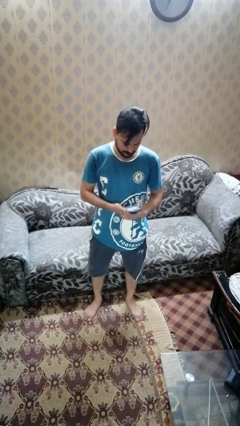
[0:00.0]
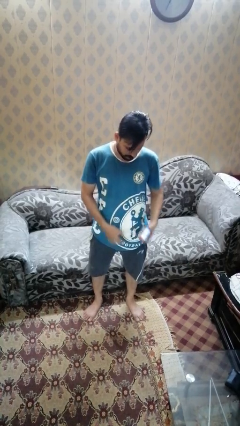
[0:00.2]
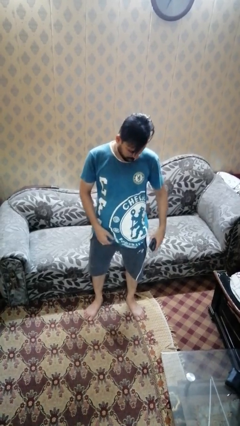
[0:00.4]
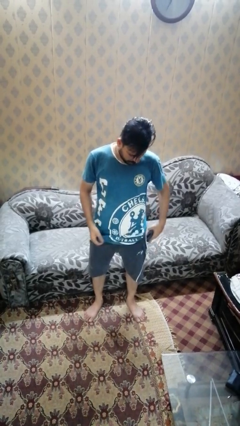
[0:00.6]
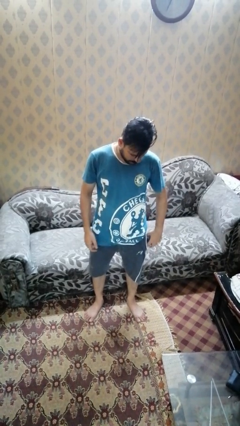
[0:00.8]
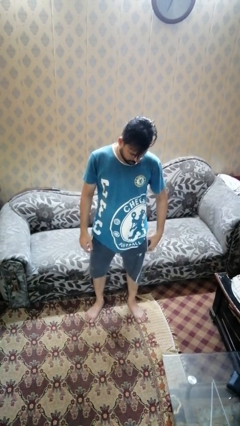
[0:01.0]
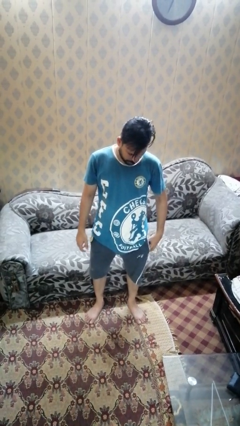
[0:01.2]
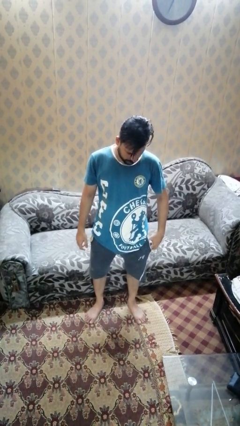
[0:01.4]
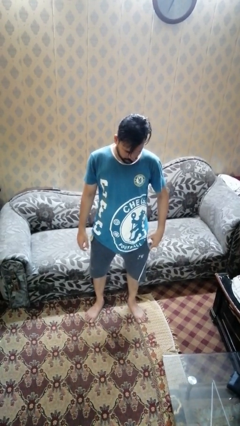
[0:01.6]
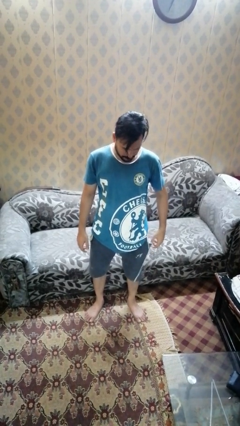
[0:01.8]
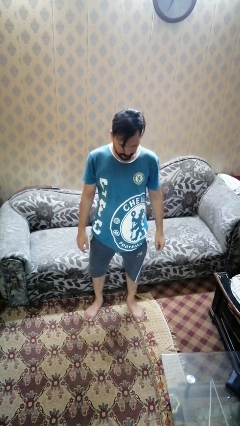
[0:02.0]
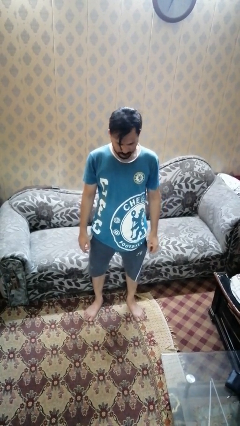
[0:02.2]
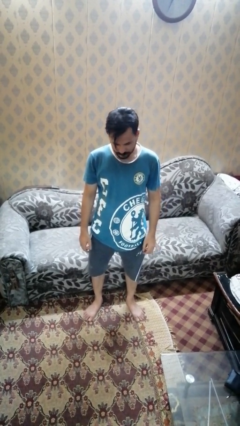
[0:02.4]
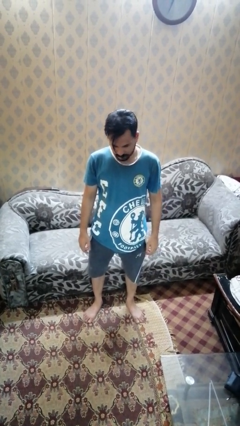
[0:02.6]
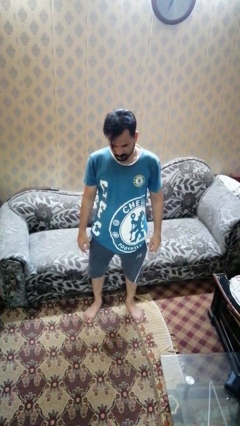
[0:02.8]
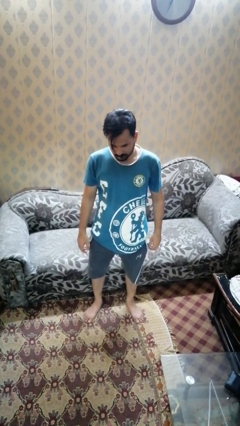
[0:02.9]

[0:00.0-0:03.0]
person puts phone into pocket

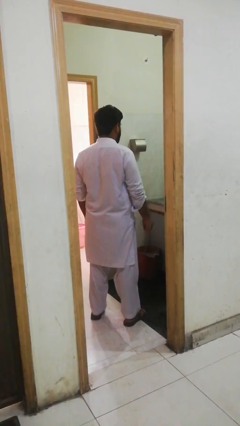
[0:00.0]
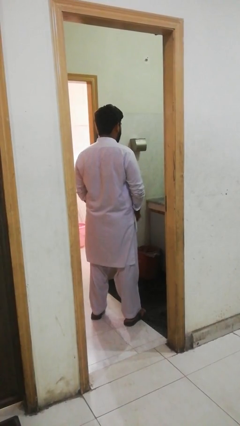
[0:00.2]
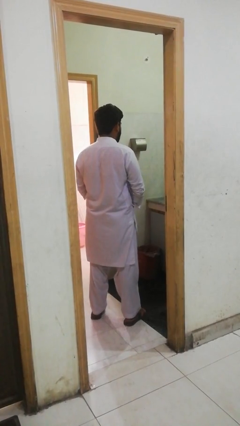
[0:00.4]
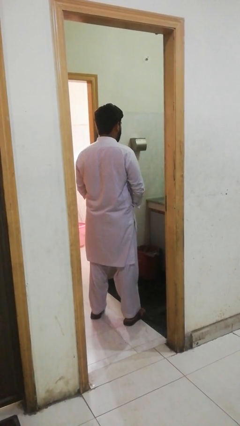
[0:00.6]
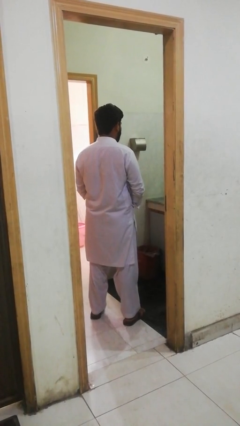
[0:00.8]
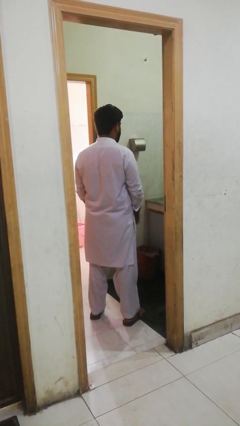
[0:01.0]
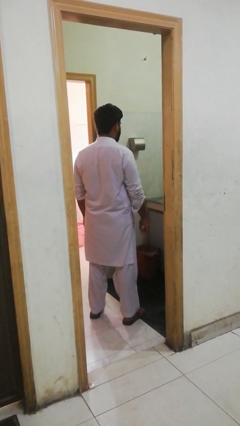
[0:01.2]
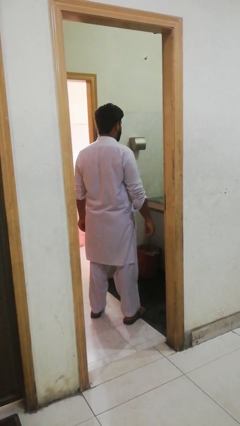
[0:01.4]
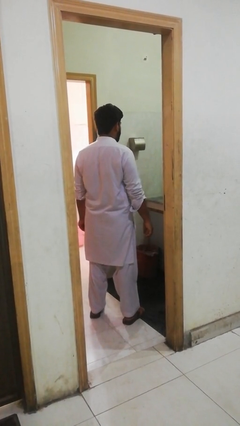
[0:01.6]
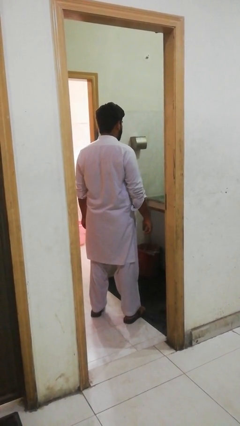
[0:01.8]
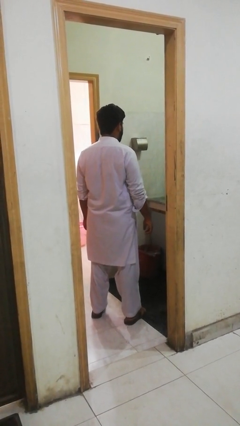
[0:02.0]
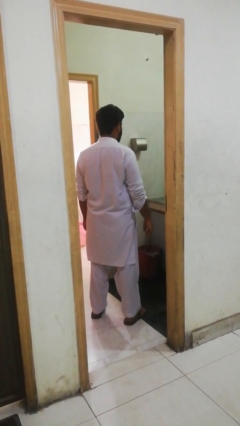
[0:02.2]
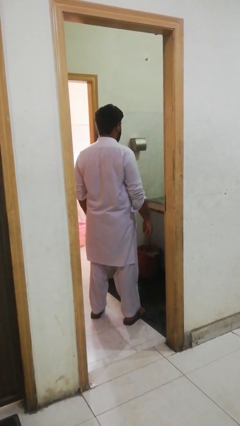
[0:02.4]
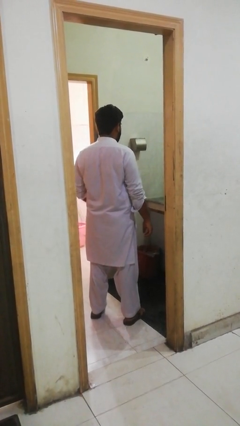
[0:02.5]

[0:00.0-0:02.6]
person flosses

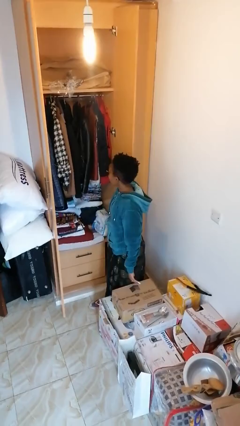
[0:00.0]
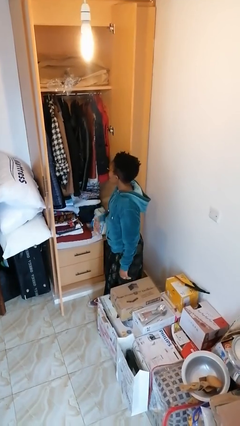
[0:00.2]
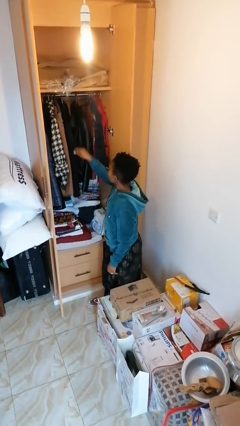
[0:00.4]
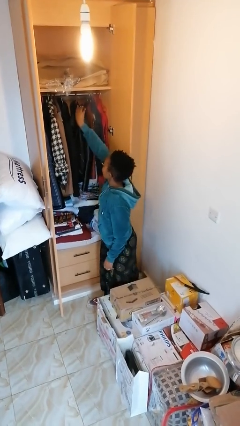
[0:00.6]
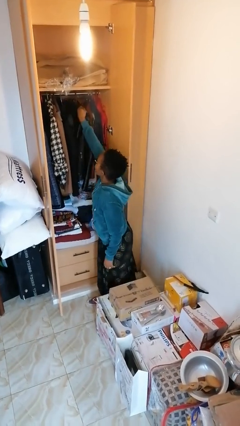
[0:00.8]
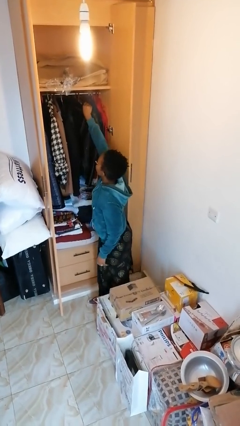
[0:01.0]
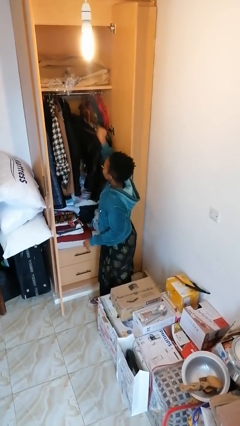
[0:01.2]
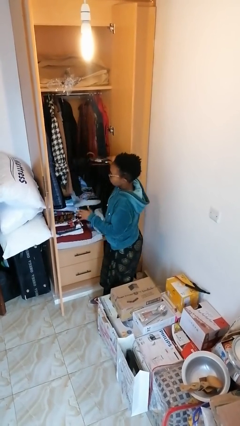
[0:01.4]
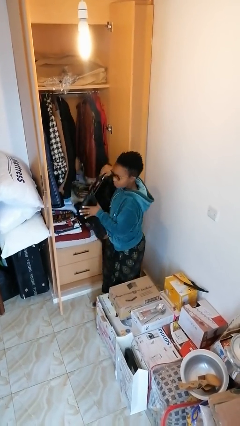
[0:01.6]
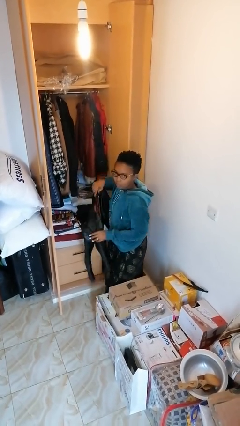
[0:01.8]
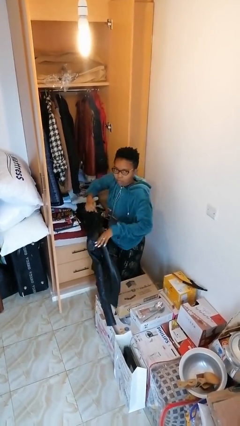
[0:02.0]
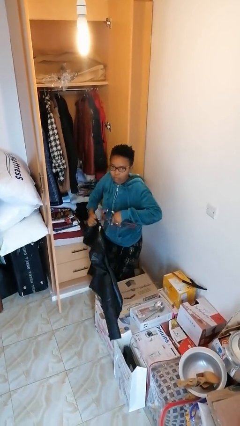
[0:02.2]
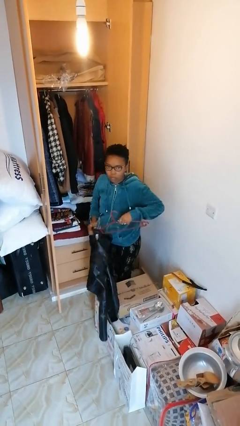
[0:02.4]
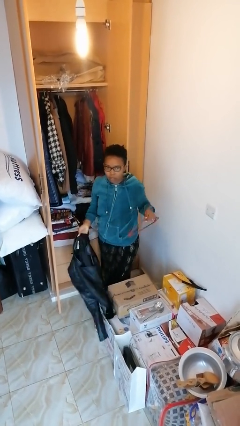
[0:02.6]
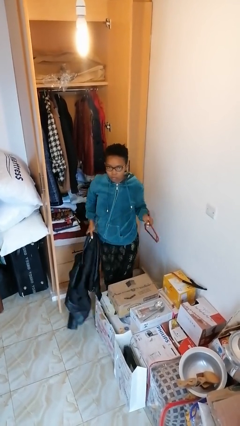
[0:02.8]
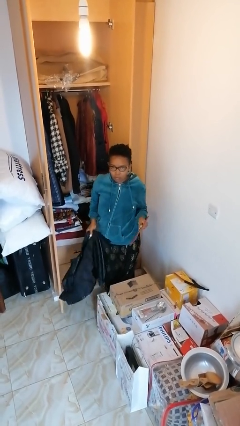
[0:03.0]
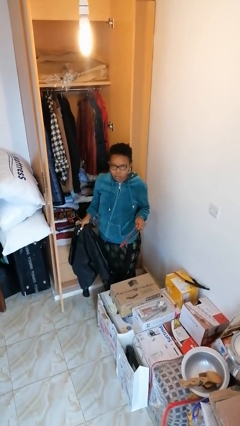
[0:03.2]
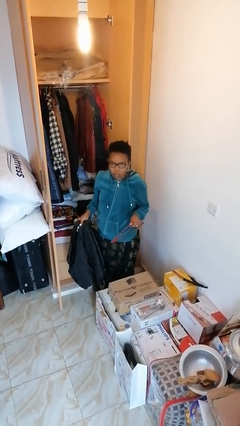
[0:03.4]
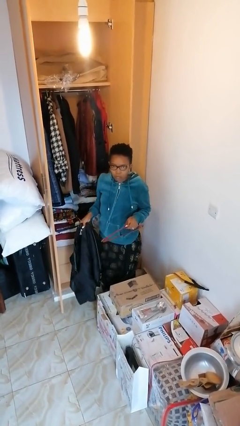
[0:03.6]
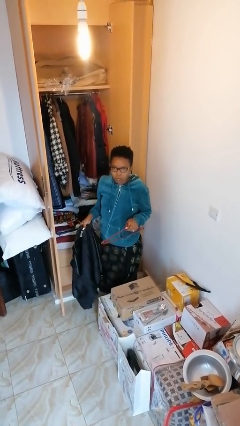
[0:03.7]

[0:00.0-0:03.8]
person takes clothes from closet

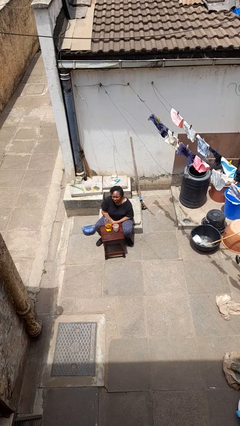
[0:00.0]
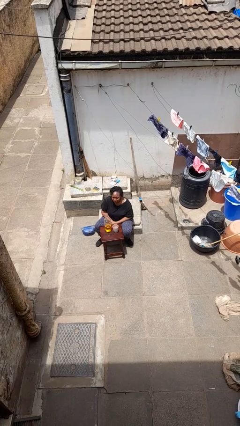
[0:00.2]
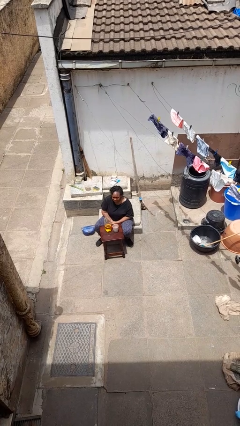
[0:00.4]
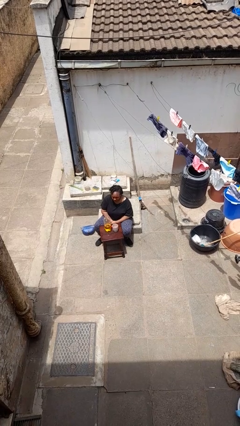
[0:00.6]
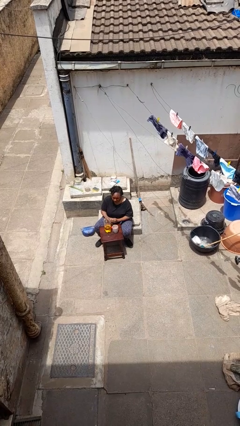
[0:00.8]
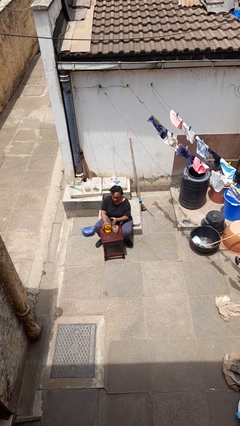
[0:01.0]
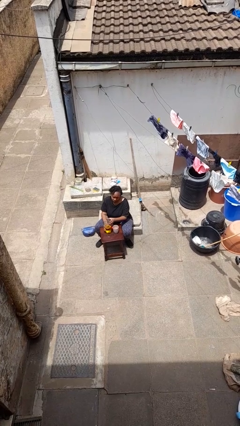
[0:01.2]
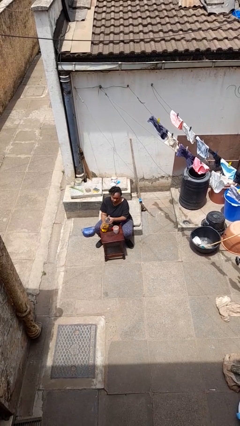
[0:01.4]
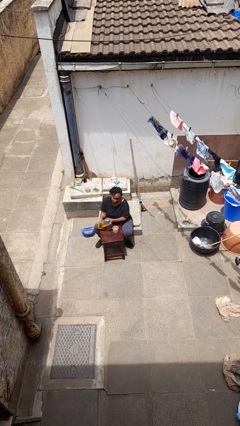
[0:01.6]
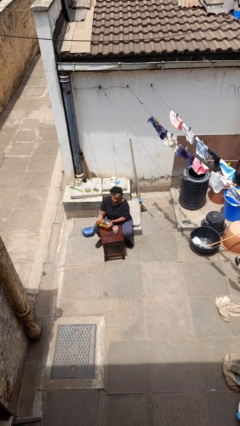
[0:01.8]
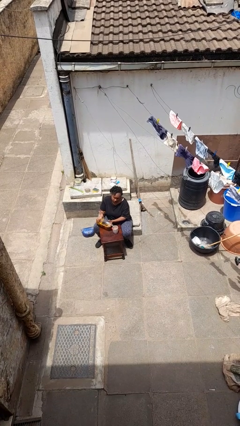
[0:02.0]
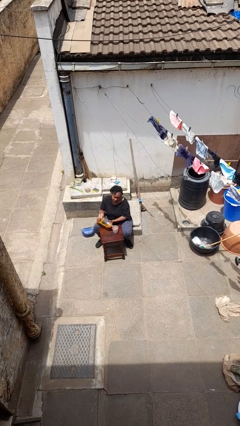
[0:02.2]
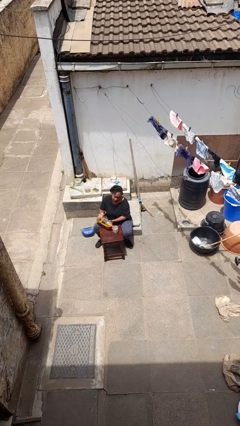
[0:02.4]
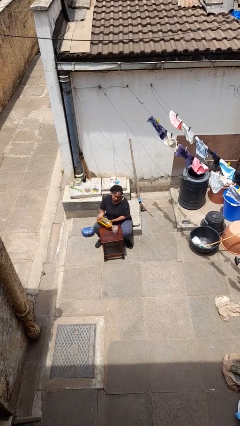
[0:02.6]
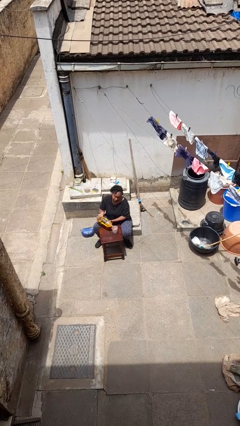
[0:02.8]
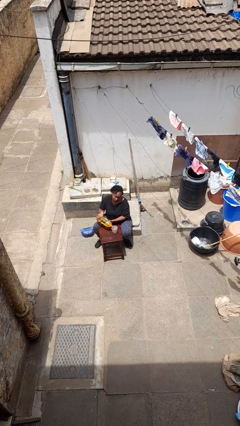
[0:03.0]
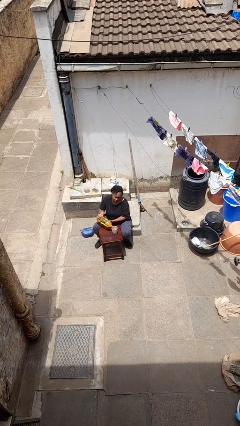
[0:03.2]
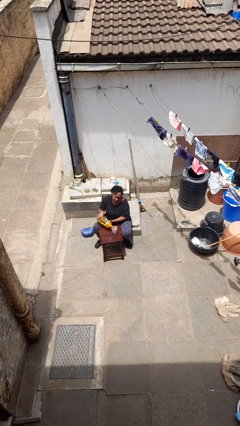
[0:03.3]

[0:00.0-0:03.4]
person pours liquid into cup

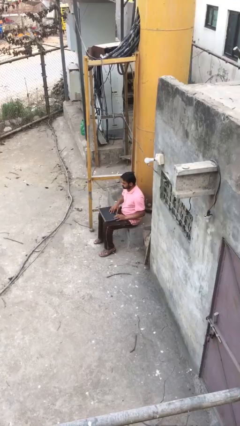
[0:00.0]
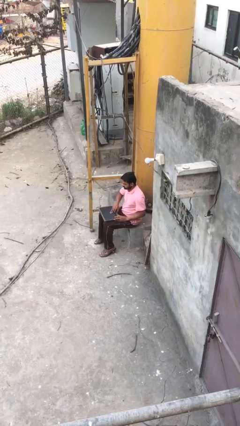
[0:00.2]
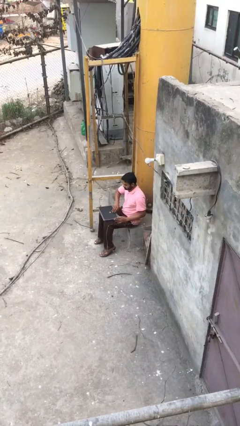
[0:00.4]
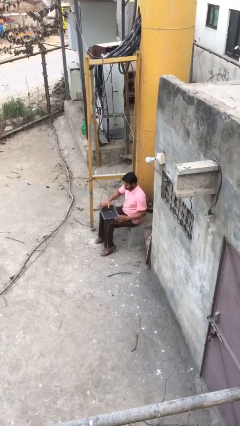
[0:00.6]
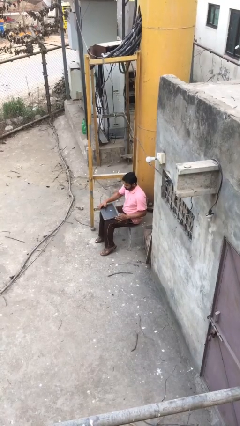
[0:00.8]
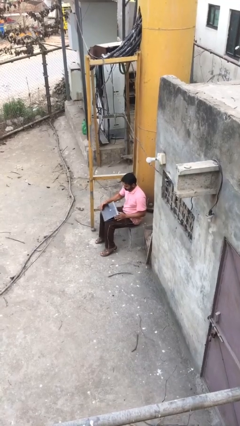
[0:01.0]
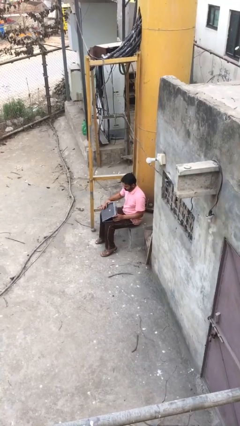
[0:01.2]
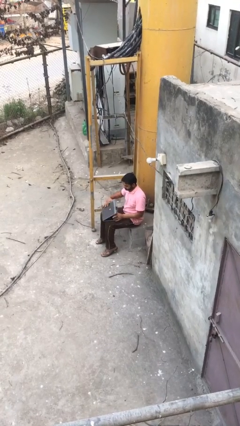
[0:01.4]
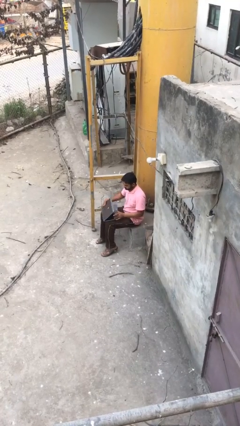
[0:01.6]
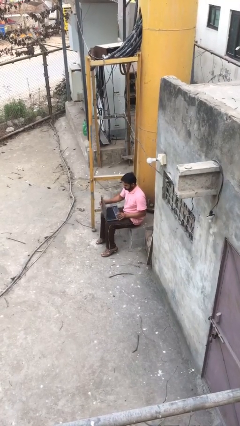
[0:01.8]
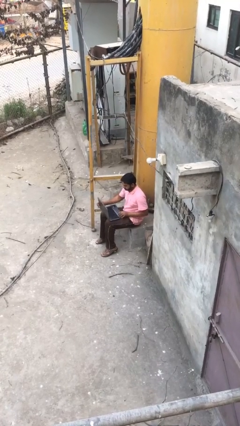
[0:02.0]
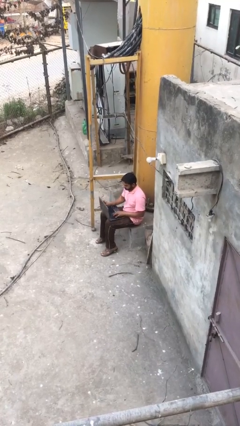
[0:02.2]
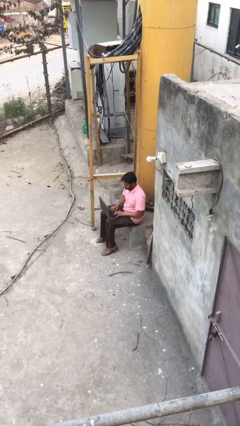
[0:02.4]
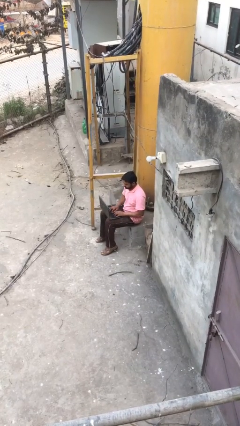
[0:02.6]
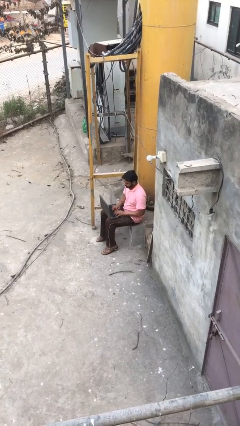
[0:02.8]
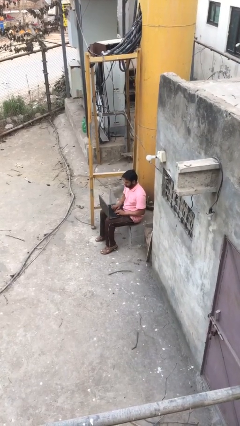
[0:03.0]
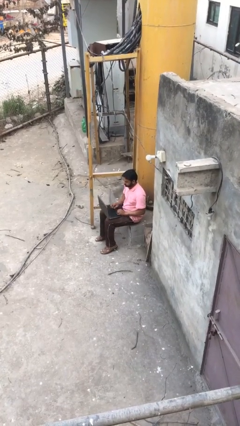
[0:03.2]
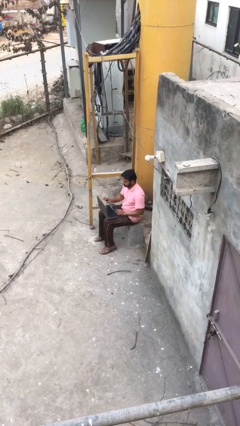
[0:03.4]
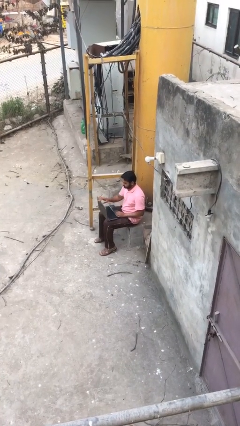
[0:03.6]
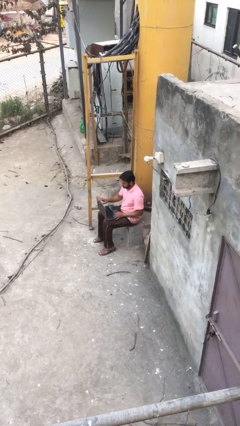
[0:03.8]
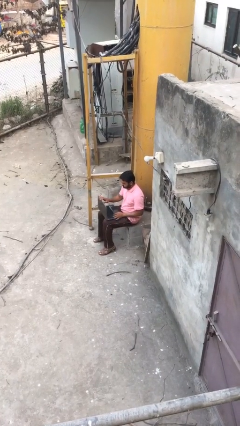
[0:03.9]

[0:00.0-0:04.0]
person interacts with laptop

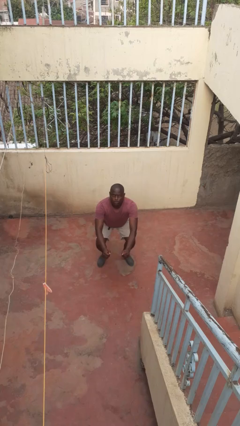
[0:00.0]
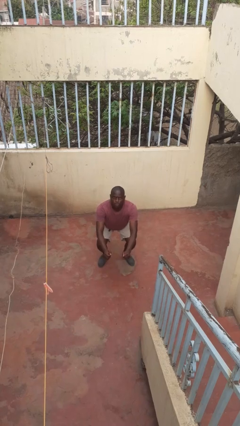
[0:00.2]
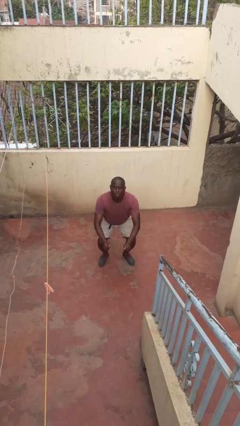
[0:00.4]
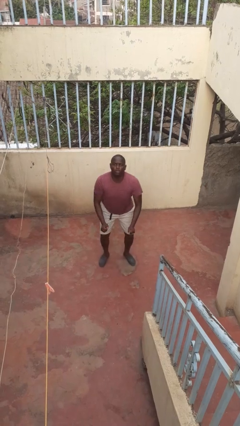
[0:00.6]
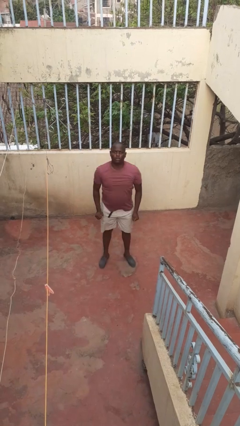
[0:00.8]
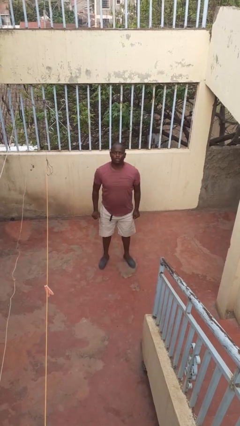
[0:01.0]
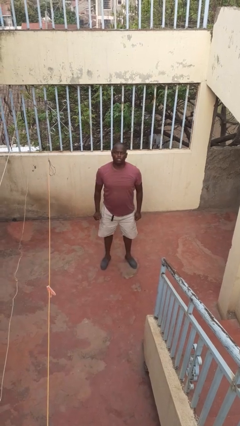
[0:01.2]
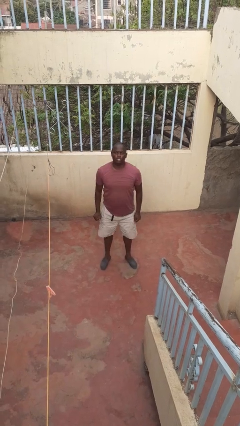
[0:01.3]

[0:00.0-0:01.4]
person stands up
